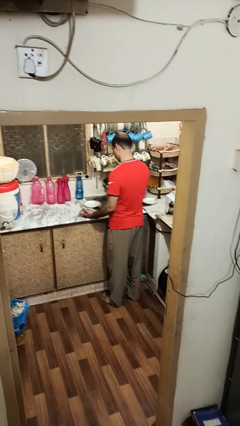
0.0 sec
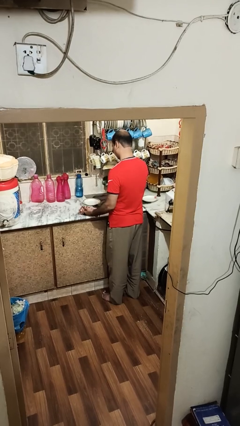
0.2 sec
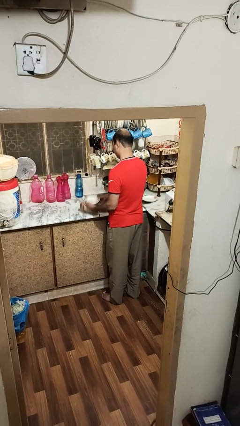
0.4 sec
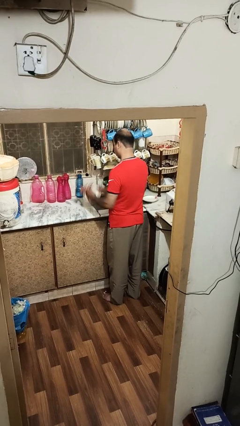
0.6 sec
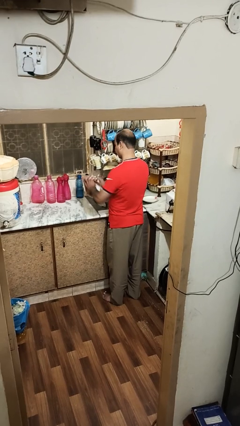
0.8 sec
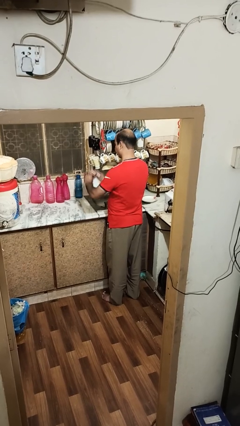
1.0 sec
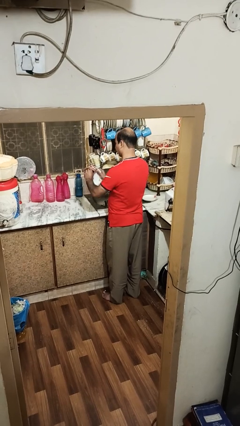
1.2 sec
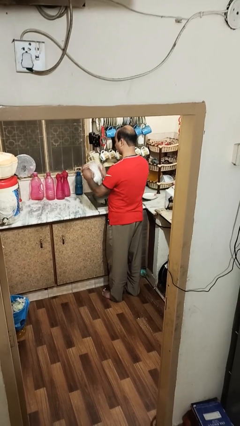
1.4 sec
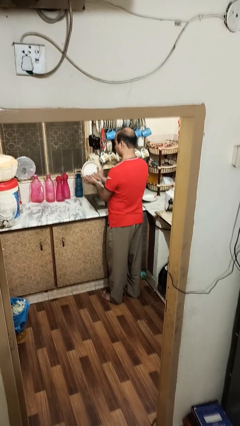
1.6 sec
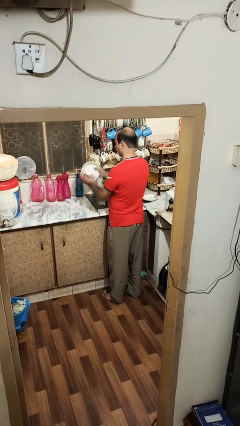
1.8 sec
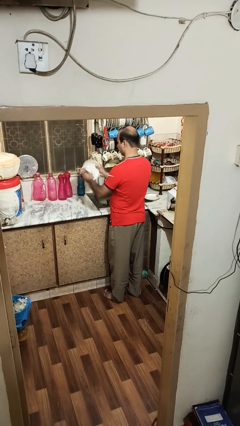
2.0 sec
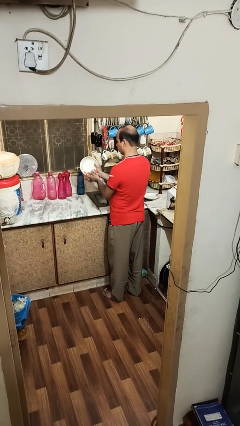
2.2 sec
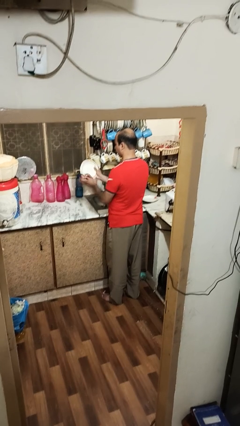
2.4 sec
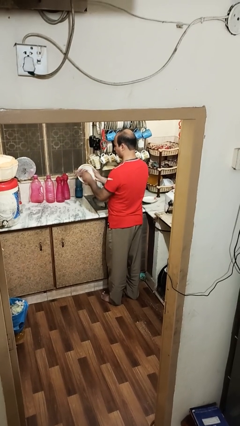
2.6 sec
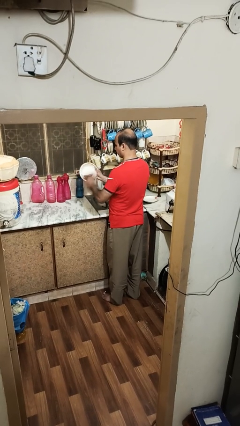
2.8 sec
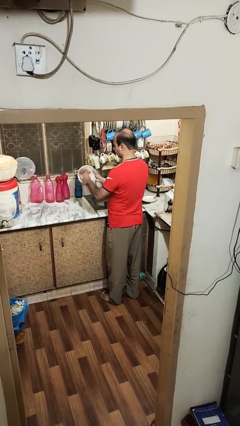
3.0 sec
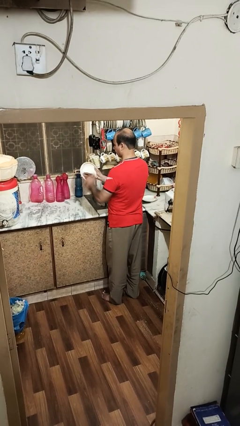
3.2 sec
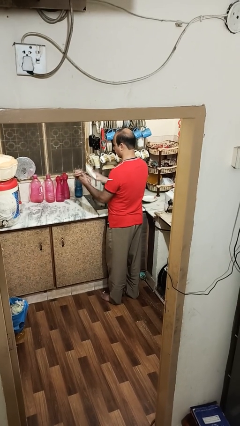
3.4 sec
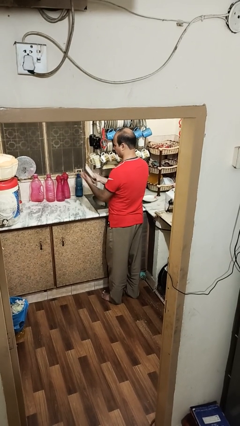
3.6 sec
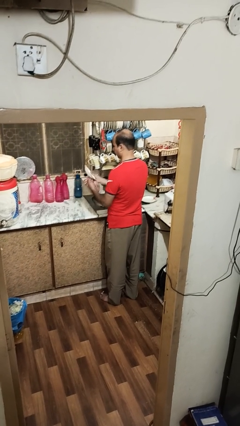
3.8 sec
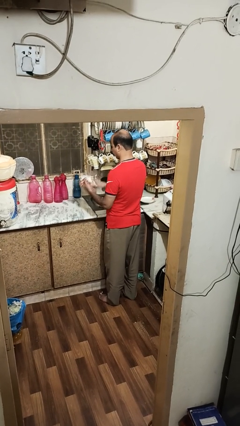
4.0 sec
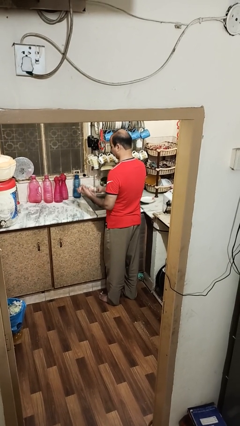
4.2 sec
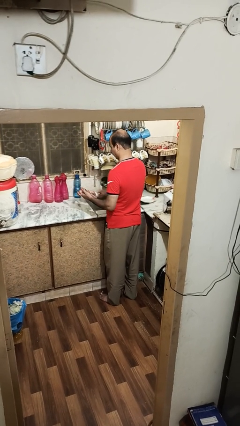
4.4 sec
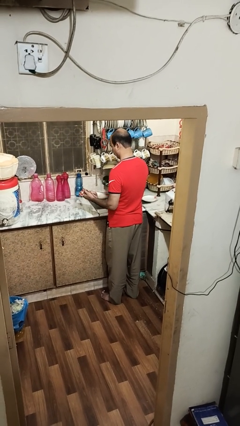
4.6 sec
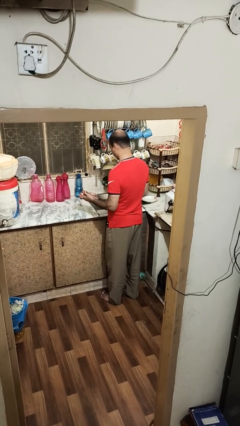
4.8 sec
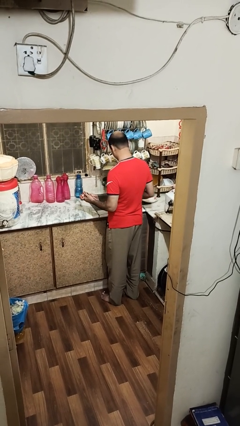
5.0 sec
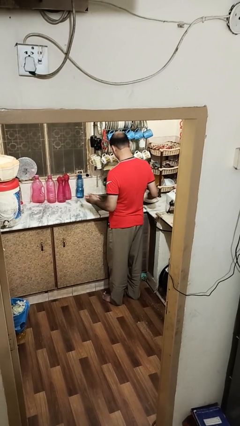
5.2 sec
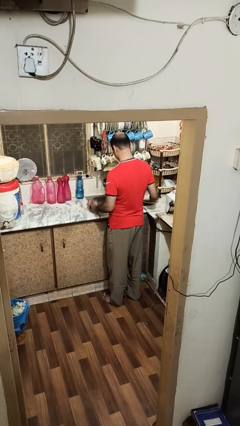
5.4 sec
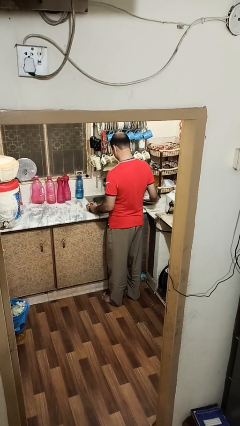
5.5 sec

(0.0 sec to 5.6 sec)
person dries dish

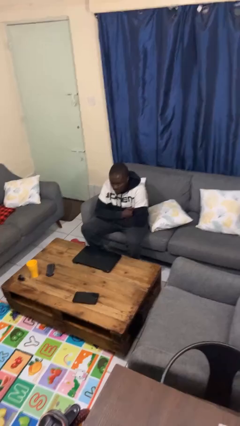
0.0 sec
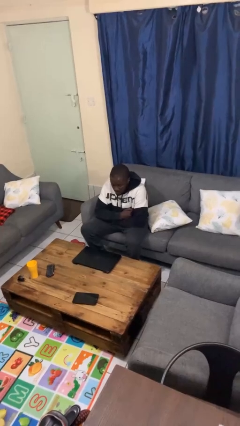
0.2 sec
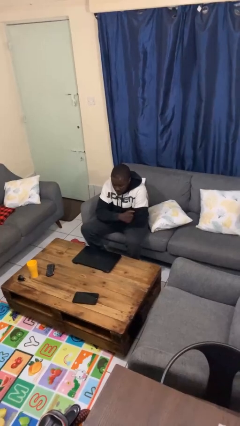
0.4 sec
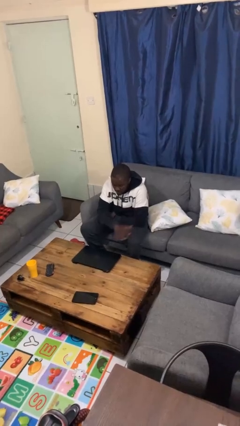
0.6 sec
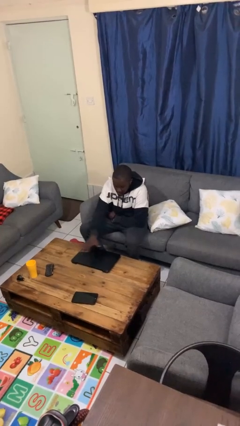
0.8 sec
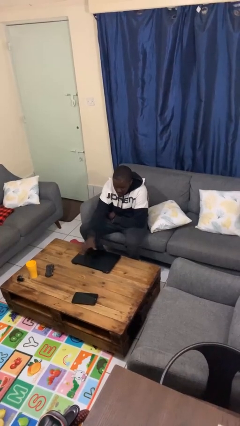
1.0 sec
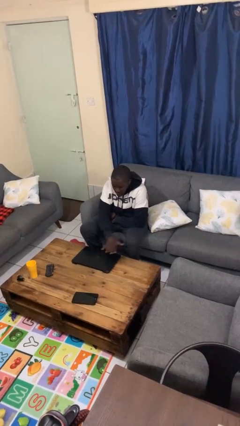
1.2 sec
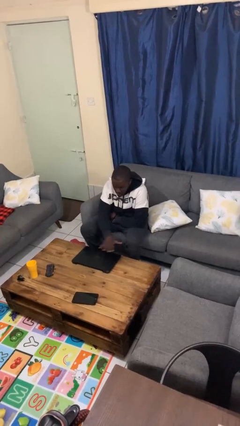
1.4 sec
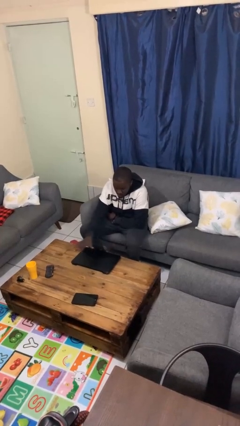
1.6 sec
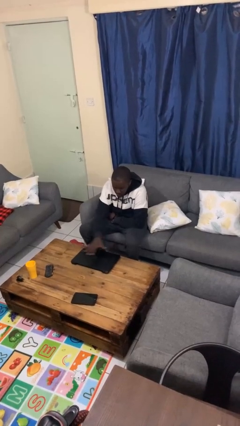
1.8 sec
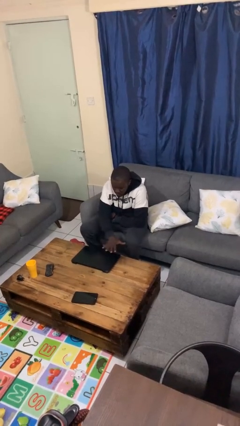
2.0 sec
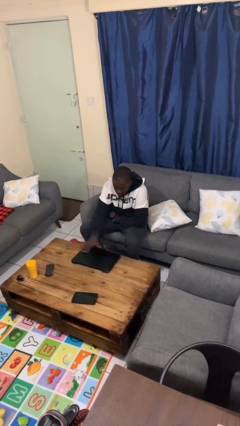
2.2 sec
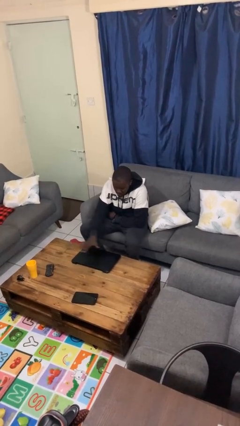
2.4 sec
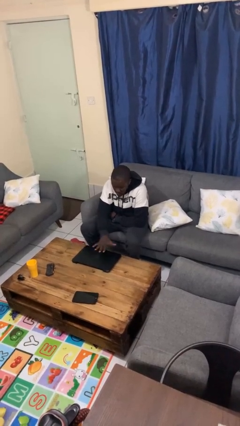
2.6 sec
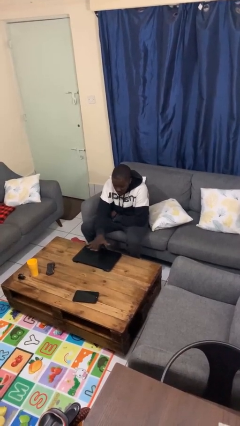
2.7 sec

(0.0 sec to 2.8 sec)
person waves hand over object

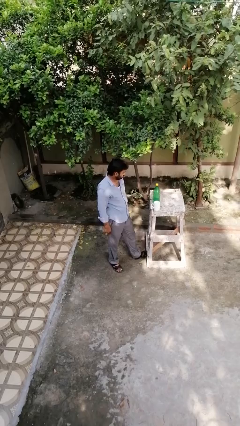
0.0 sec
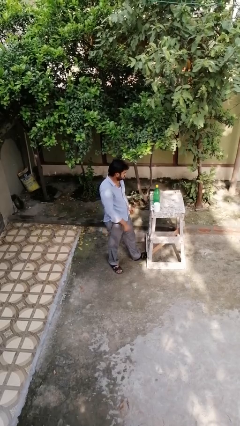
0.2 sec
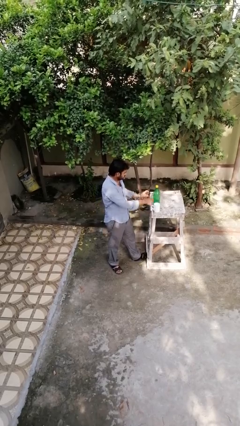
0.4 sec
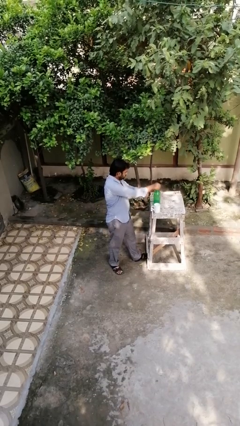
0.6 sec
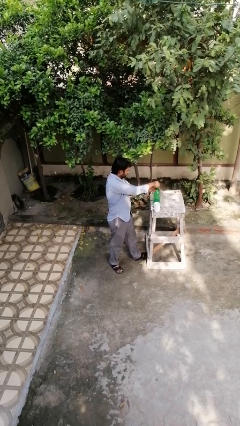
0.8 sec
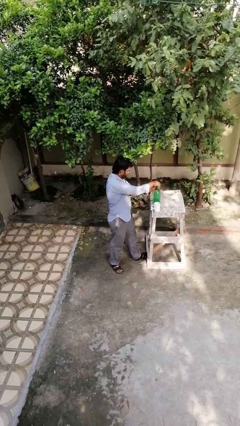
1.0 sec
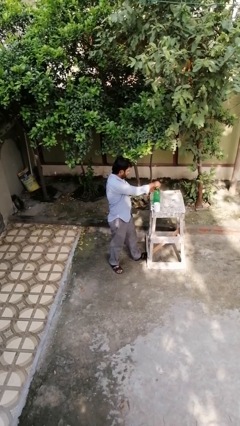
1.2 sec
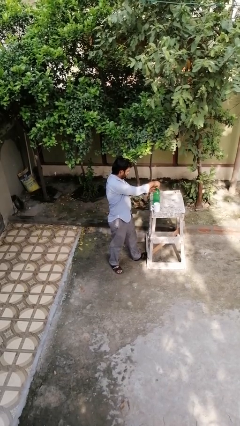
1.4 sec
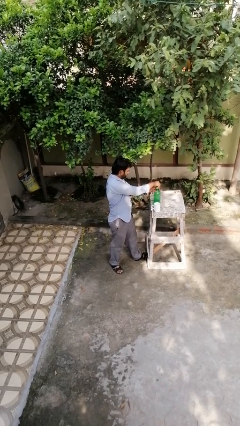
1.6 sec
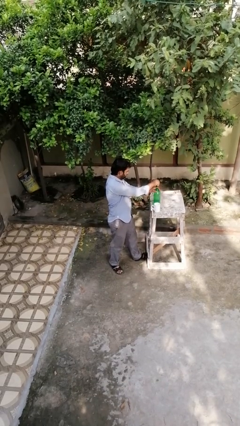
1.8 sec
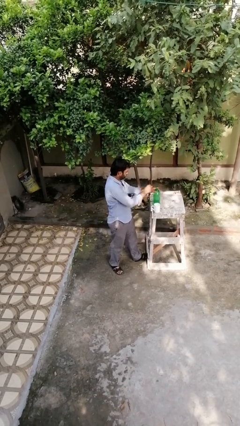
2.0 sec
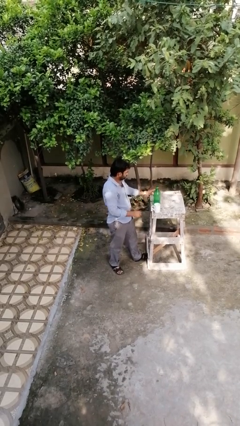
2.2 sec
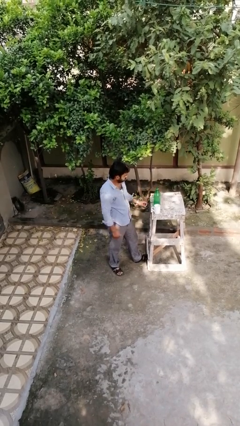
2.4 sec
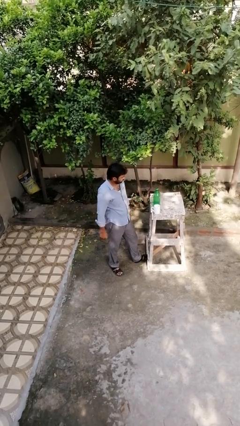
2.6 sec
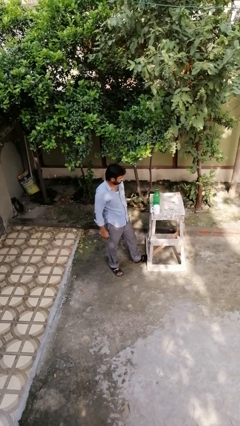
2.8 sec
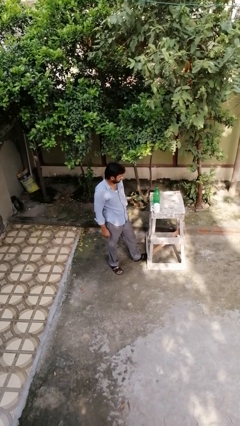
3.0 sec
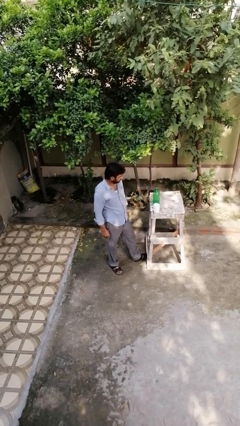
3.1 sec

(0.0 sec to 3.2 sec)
person unscrews lid from bottle

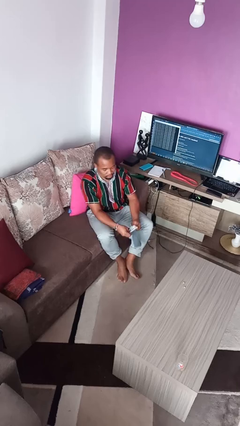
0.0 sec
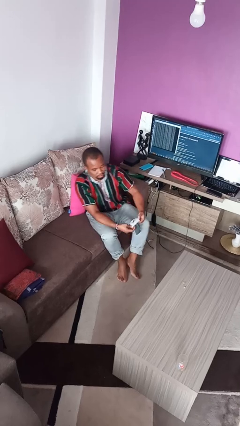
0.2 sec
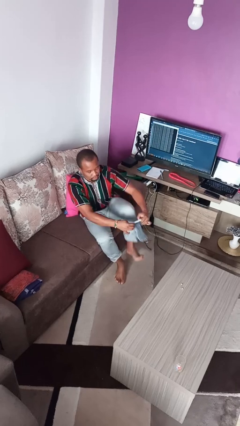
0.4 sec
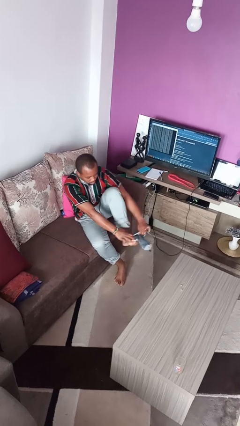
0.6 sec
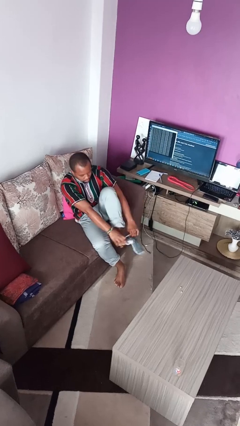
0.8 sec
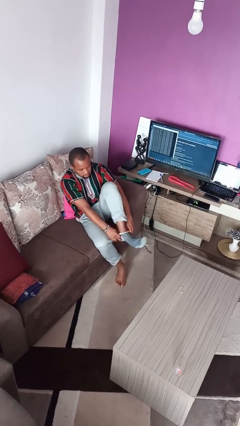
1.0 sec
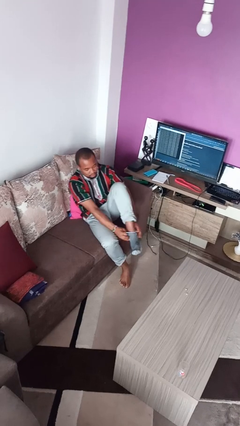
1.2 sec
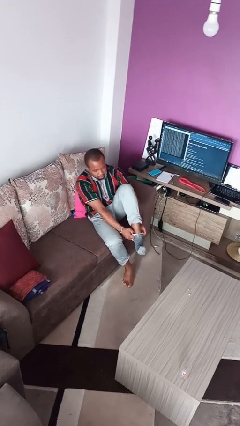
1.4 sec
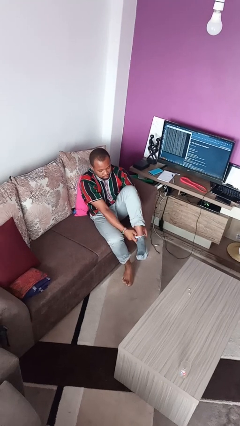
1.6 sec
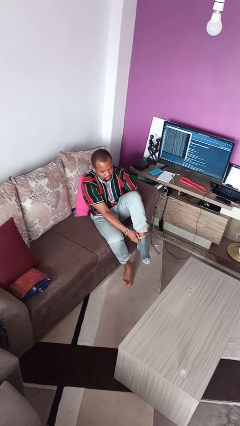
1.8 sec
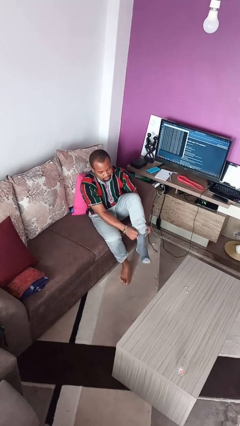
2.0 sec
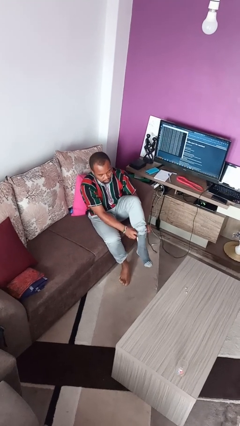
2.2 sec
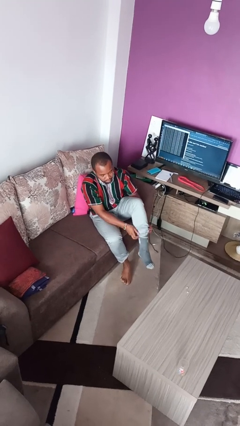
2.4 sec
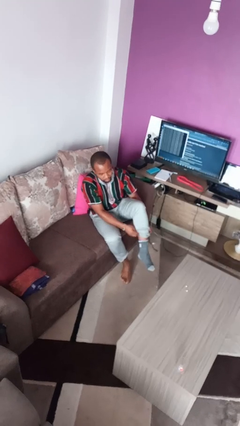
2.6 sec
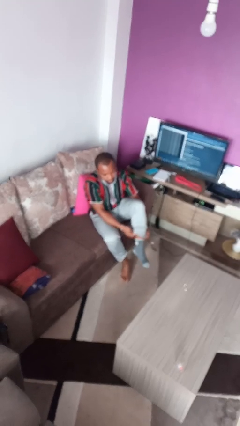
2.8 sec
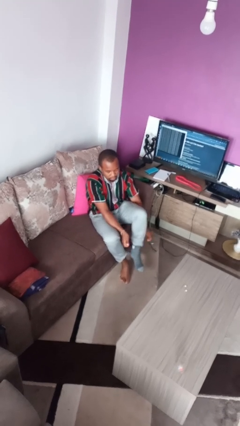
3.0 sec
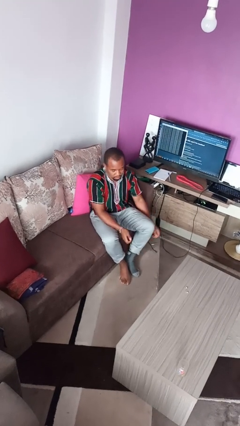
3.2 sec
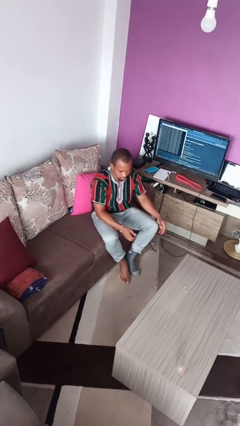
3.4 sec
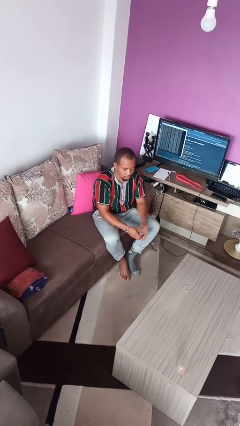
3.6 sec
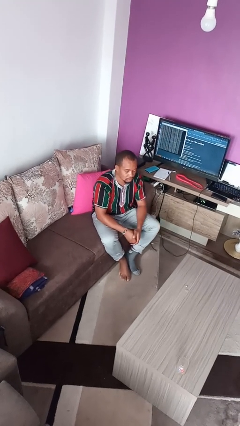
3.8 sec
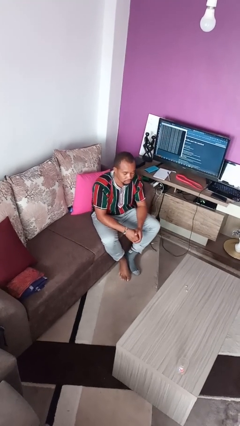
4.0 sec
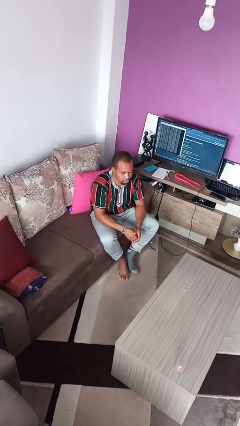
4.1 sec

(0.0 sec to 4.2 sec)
person puts on socks

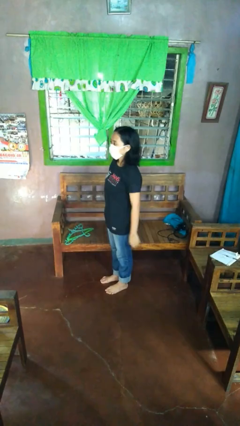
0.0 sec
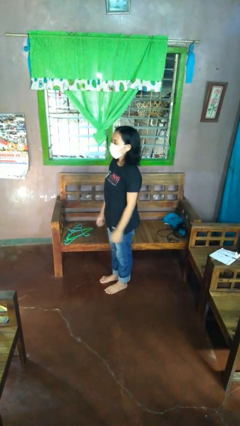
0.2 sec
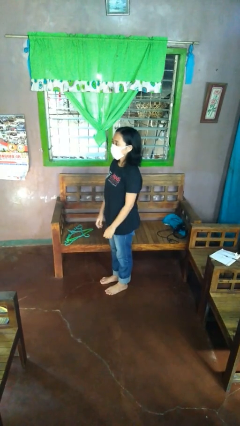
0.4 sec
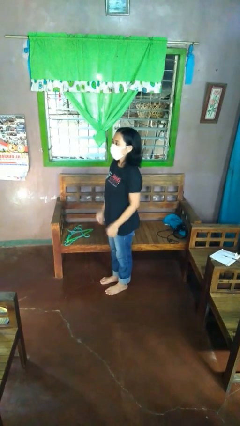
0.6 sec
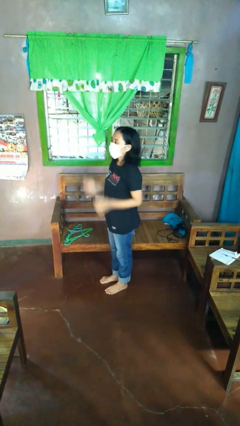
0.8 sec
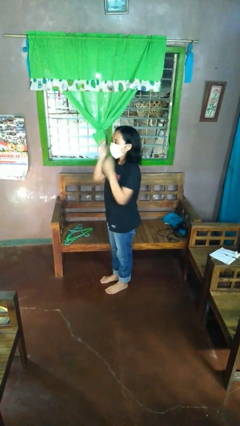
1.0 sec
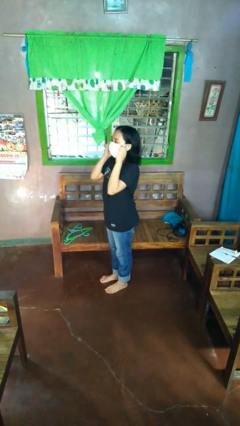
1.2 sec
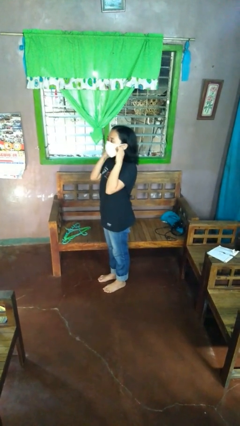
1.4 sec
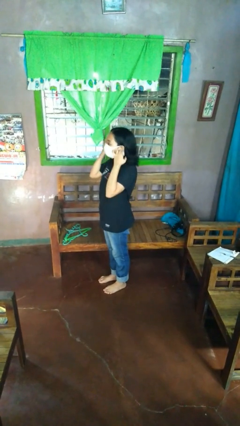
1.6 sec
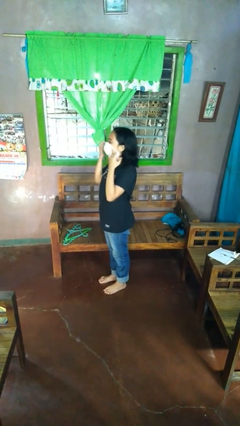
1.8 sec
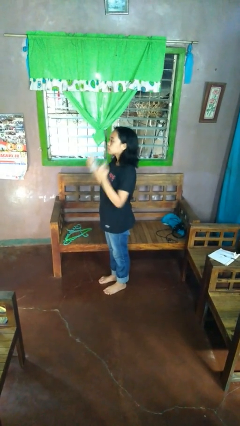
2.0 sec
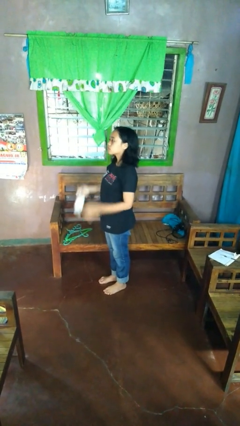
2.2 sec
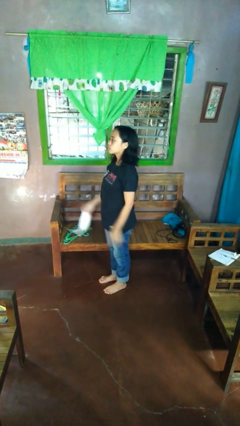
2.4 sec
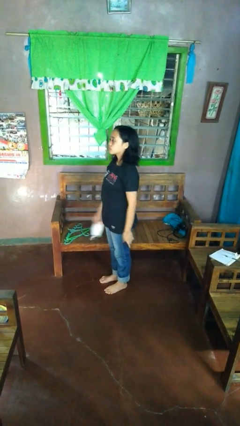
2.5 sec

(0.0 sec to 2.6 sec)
person takes off facemask
